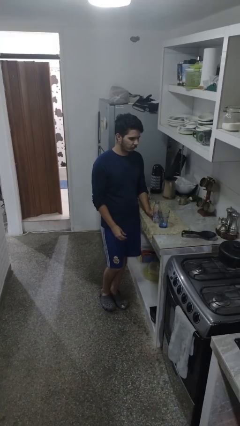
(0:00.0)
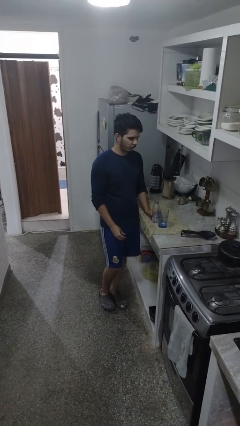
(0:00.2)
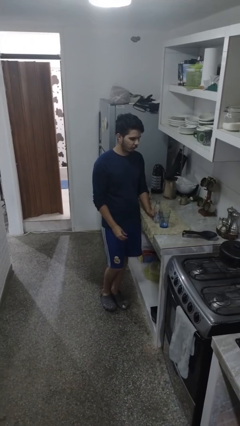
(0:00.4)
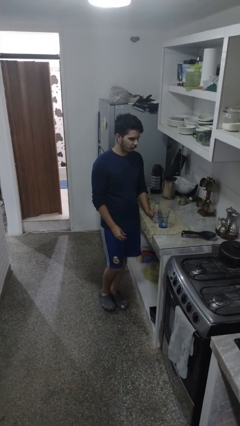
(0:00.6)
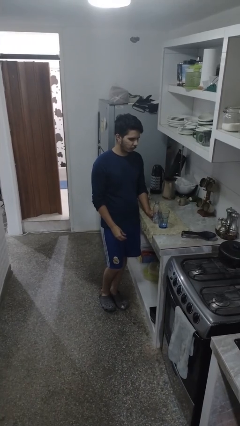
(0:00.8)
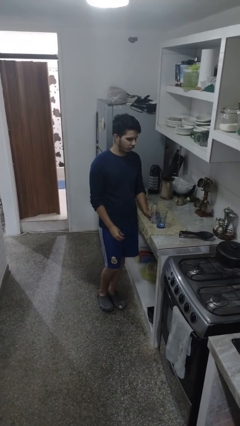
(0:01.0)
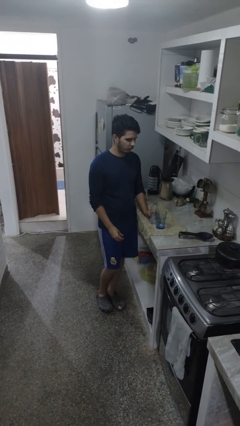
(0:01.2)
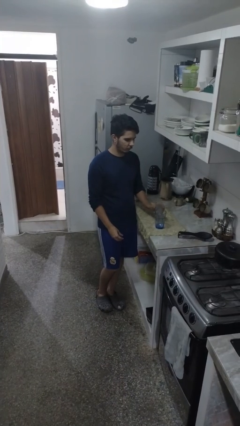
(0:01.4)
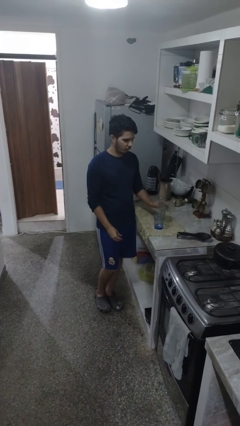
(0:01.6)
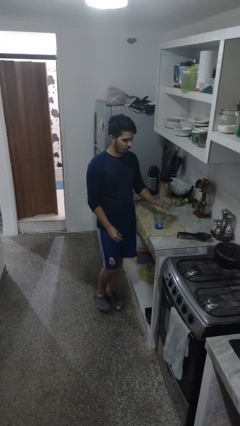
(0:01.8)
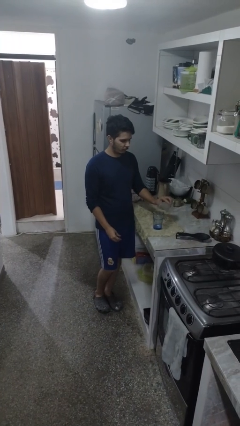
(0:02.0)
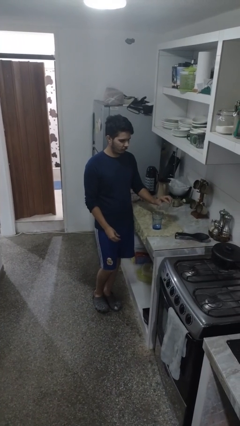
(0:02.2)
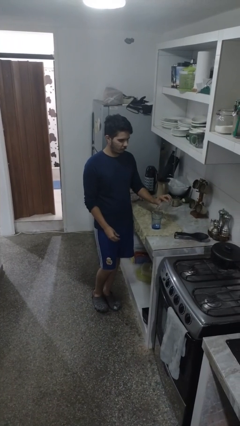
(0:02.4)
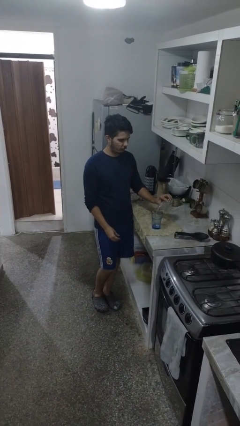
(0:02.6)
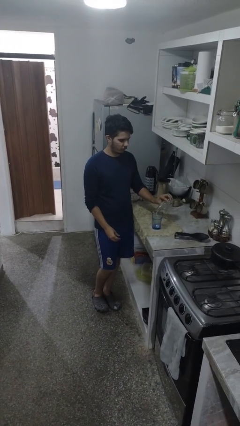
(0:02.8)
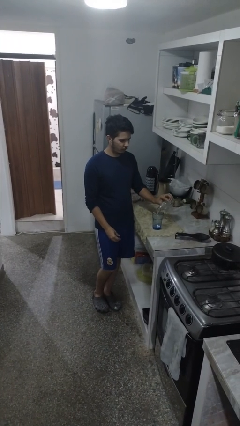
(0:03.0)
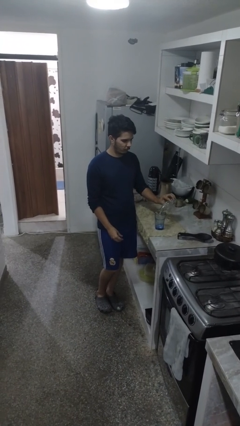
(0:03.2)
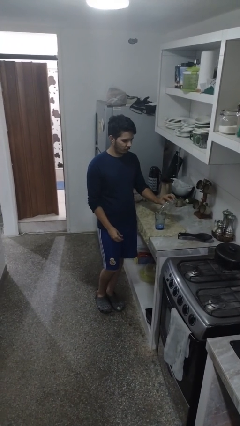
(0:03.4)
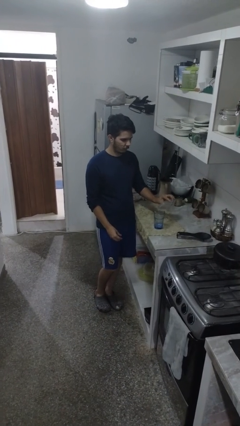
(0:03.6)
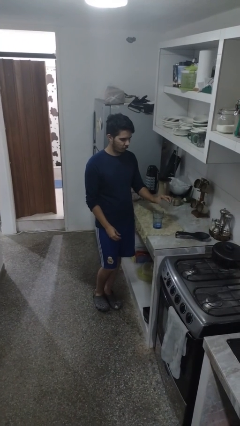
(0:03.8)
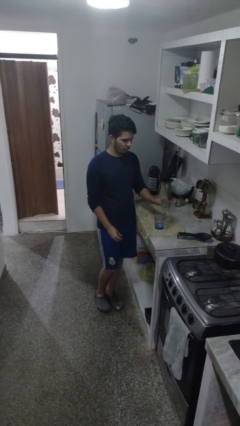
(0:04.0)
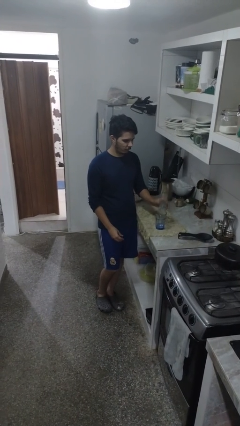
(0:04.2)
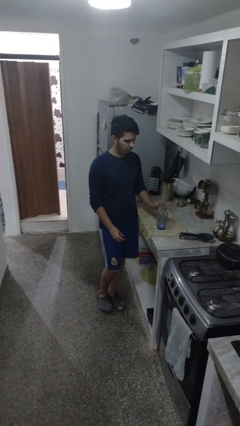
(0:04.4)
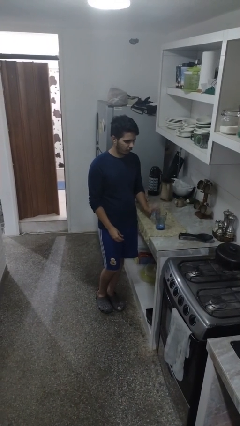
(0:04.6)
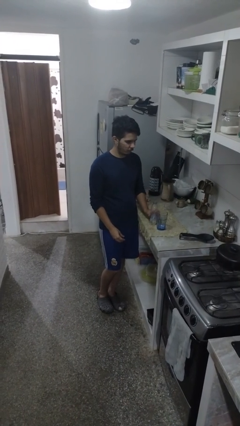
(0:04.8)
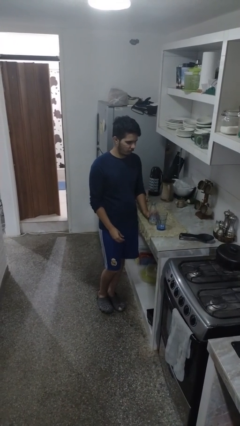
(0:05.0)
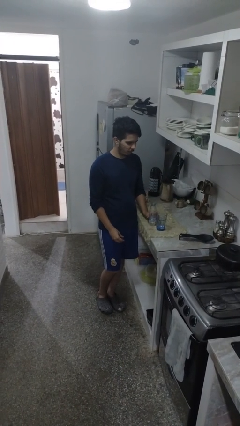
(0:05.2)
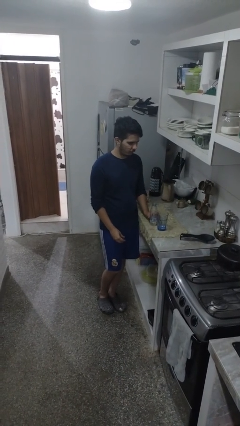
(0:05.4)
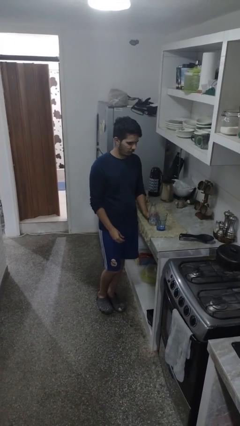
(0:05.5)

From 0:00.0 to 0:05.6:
person pours liquid into cup

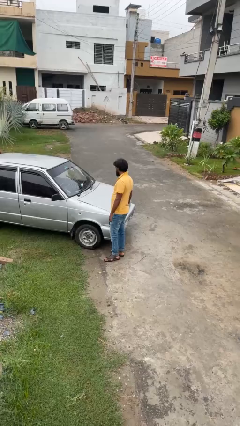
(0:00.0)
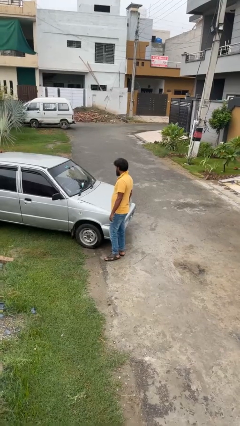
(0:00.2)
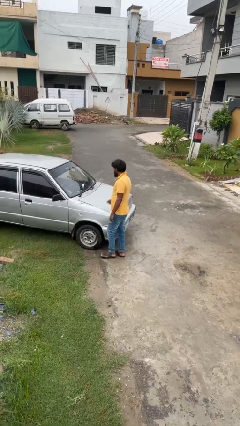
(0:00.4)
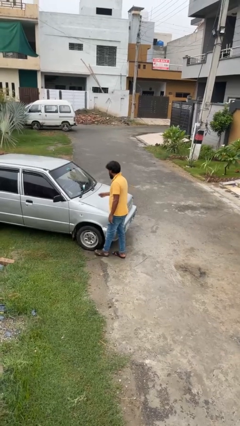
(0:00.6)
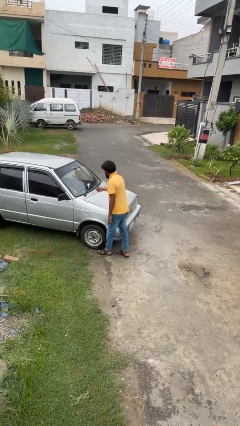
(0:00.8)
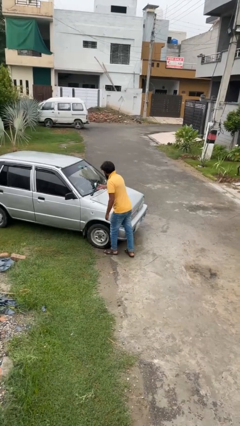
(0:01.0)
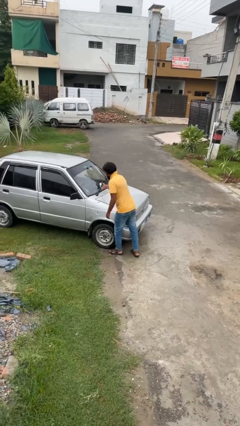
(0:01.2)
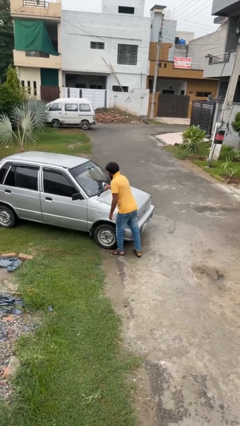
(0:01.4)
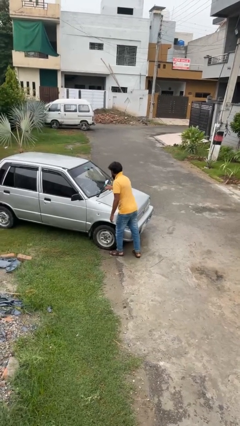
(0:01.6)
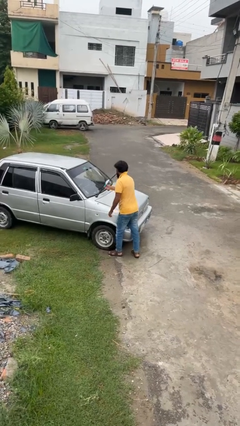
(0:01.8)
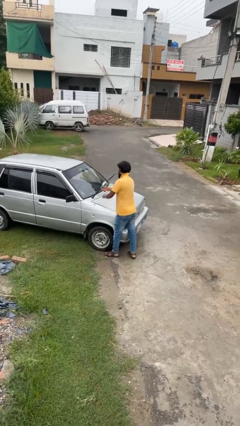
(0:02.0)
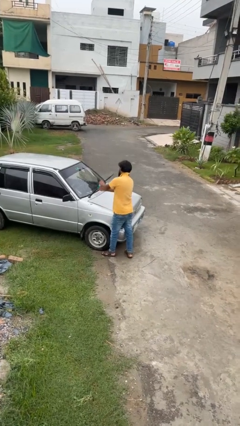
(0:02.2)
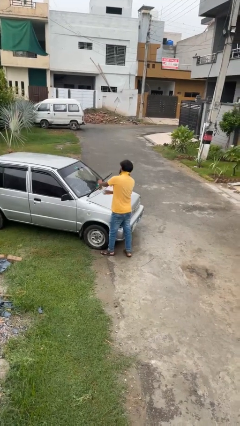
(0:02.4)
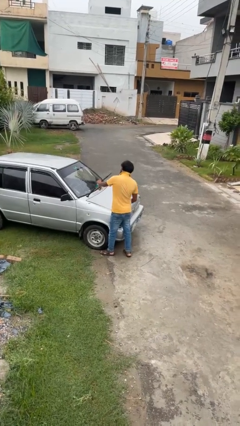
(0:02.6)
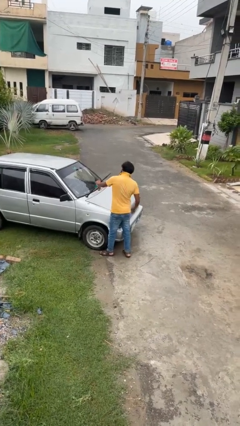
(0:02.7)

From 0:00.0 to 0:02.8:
person flips up car wipers

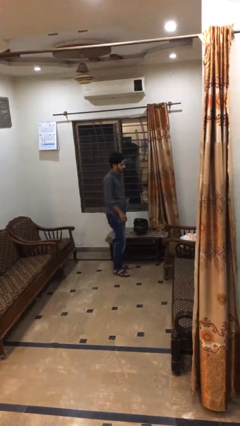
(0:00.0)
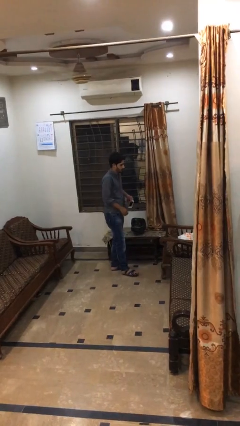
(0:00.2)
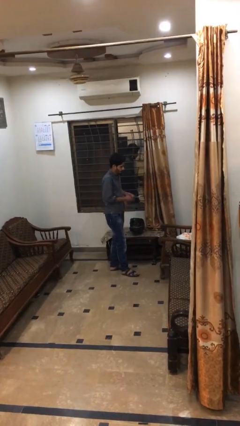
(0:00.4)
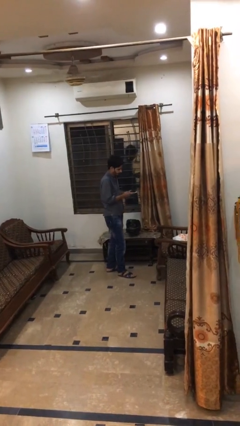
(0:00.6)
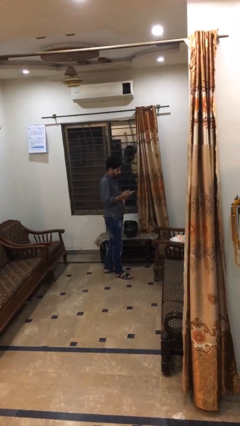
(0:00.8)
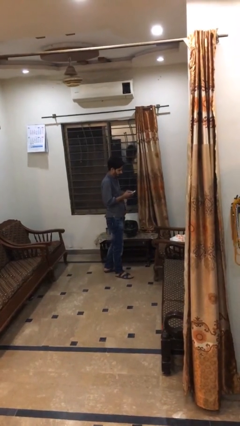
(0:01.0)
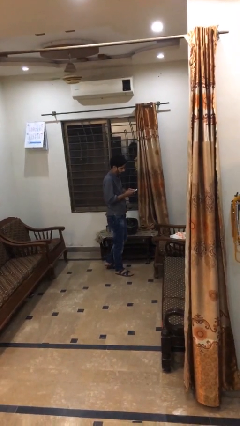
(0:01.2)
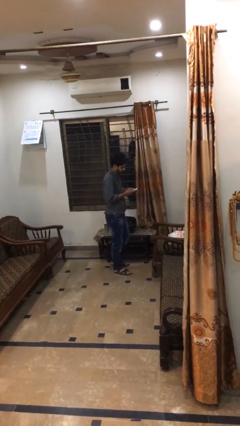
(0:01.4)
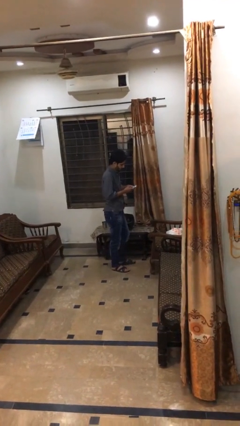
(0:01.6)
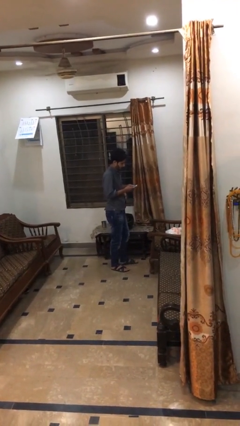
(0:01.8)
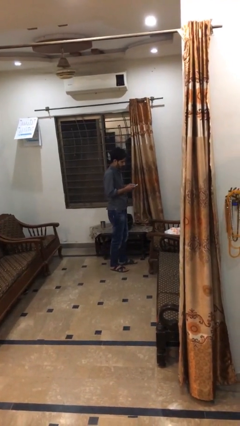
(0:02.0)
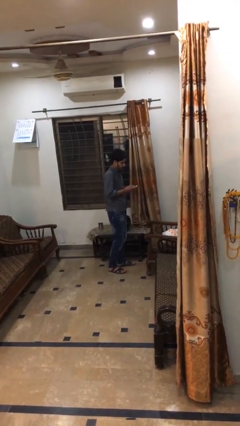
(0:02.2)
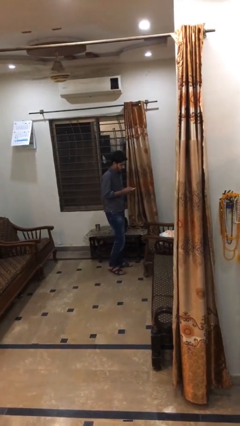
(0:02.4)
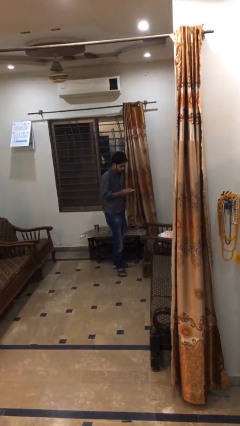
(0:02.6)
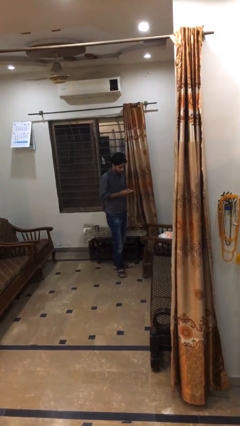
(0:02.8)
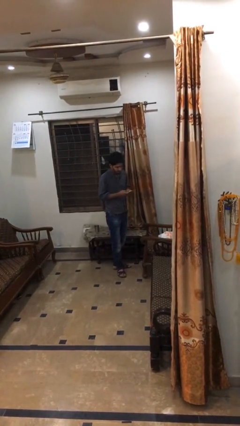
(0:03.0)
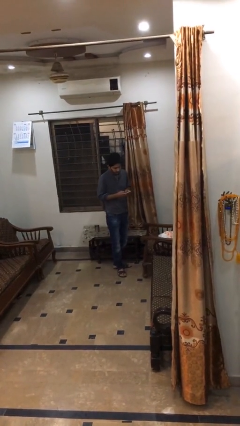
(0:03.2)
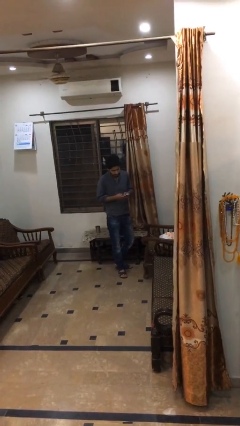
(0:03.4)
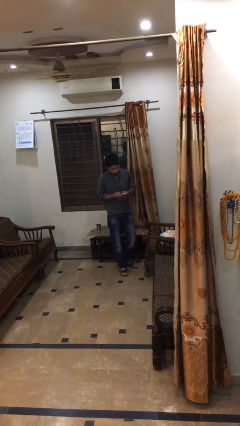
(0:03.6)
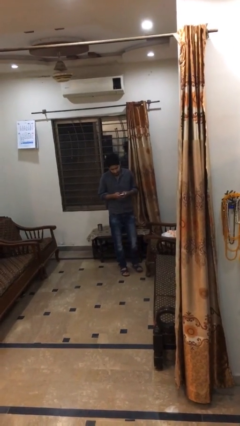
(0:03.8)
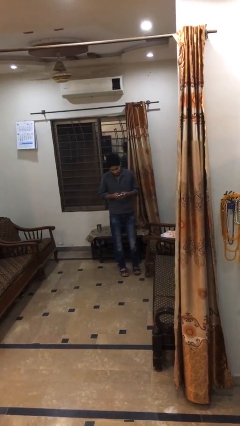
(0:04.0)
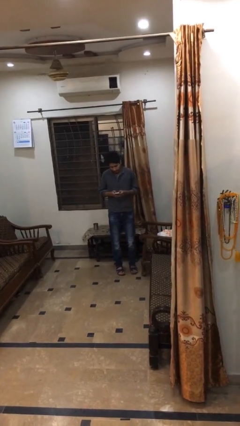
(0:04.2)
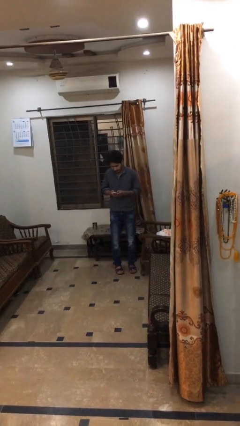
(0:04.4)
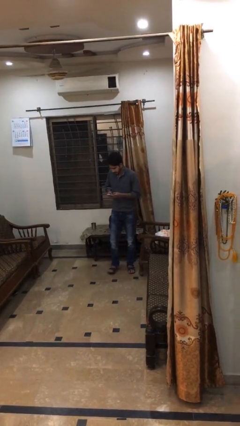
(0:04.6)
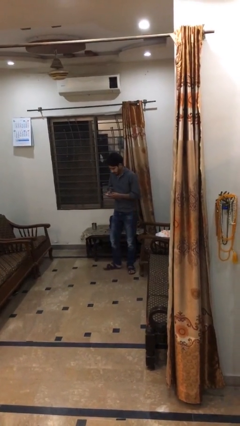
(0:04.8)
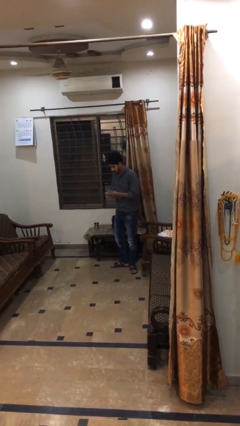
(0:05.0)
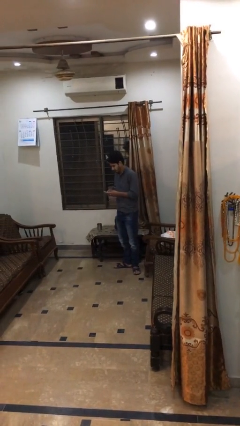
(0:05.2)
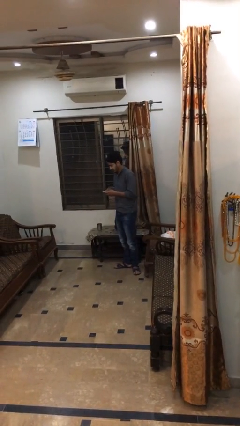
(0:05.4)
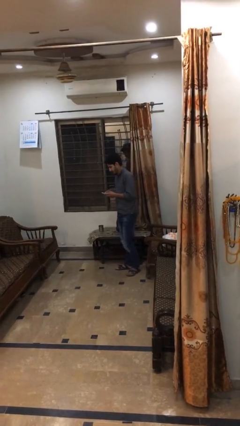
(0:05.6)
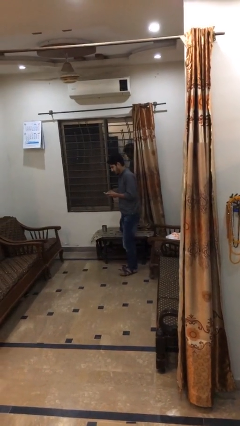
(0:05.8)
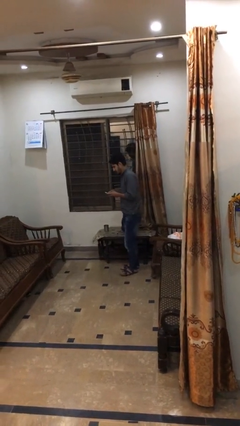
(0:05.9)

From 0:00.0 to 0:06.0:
person texts on phone

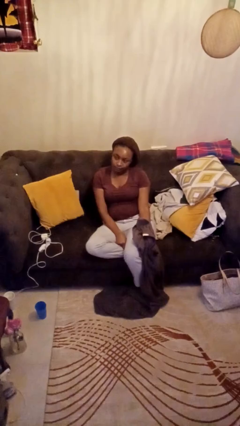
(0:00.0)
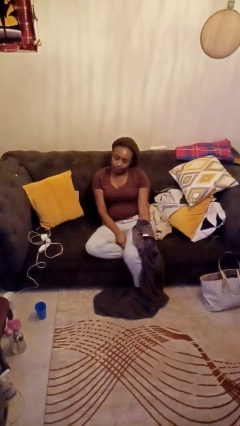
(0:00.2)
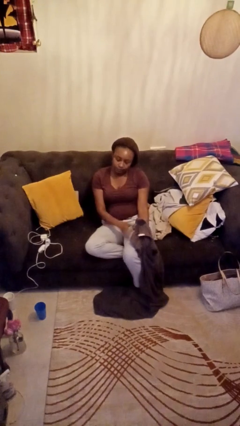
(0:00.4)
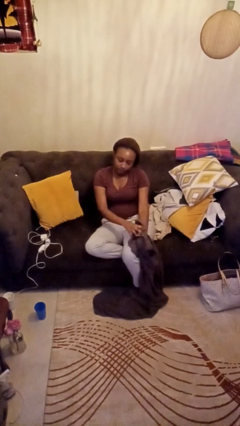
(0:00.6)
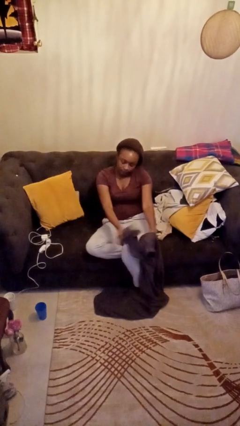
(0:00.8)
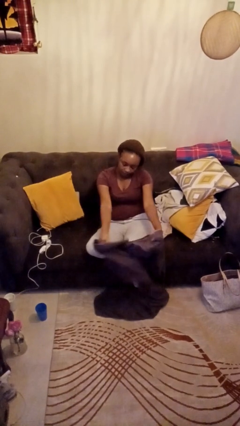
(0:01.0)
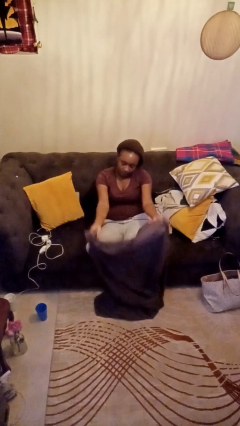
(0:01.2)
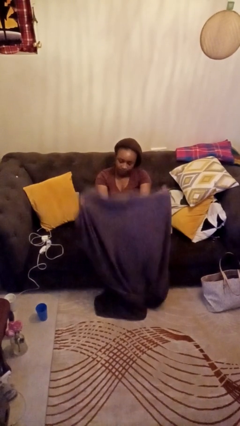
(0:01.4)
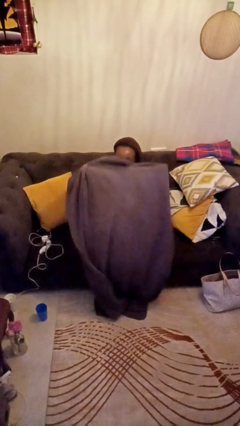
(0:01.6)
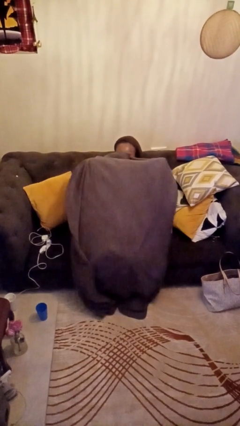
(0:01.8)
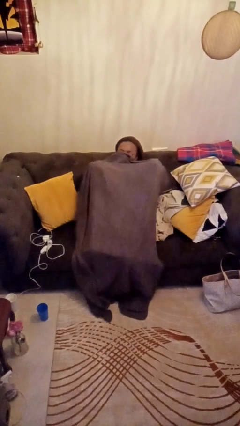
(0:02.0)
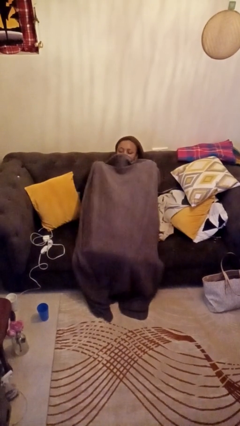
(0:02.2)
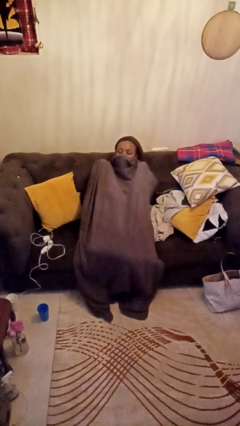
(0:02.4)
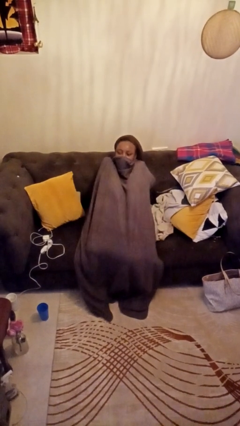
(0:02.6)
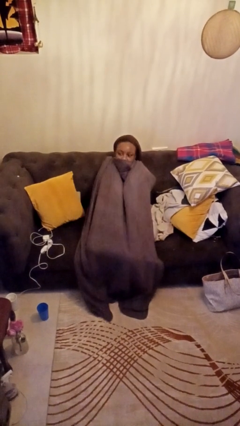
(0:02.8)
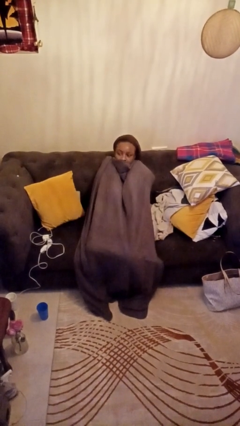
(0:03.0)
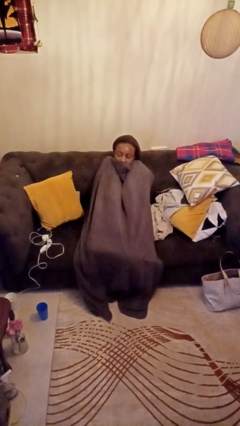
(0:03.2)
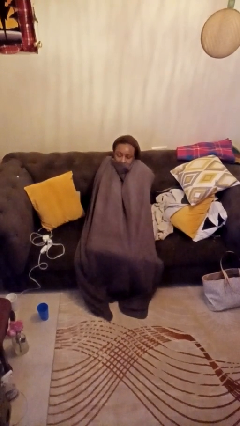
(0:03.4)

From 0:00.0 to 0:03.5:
person covers with blanket

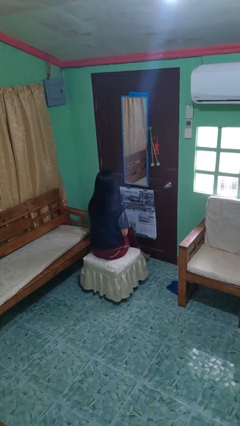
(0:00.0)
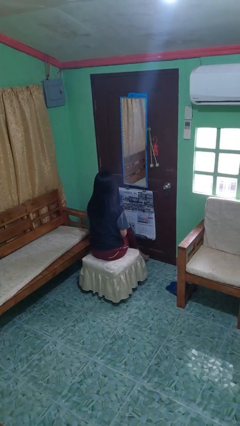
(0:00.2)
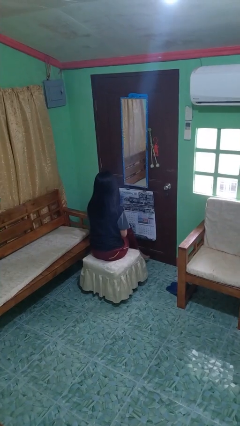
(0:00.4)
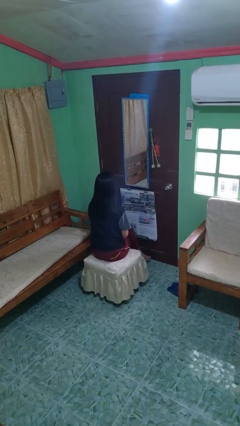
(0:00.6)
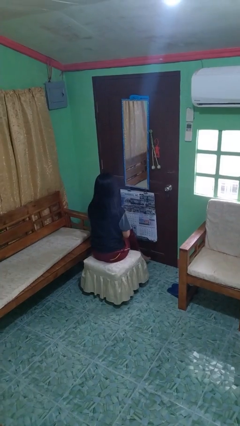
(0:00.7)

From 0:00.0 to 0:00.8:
person gestures raise hand
